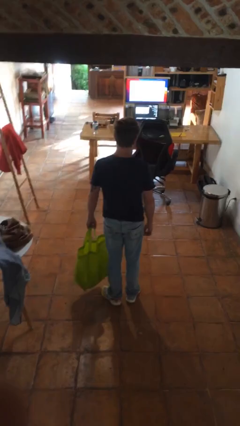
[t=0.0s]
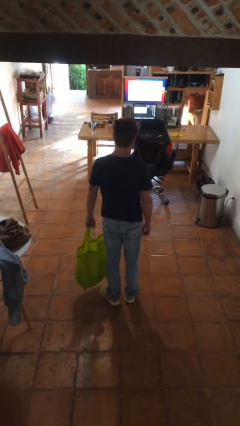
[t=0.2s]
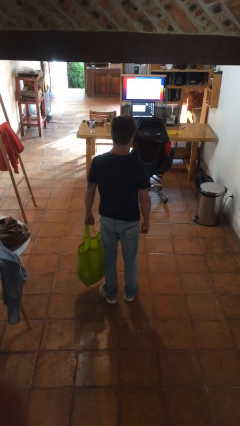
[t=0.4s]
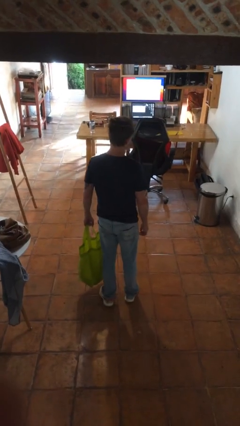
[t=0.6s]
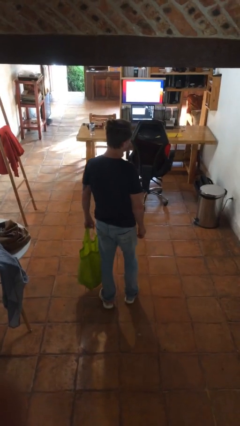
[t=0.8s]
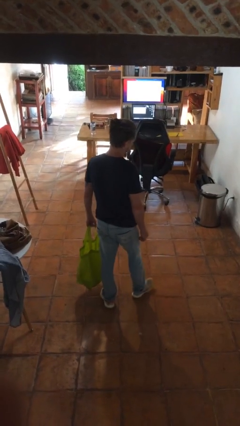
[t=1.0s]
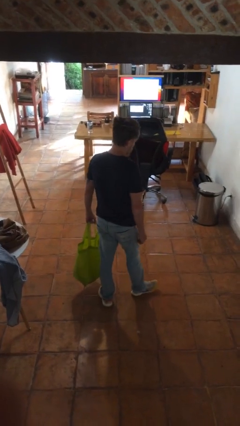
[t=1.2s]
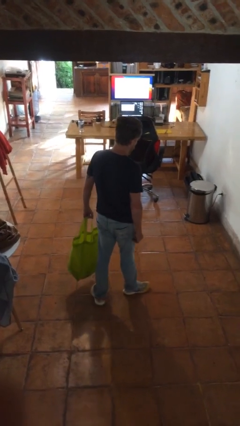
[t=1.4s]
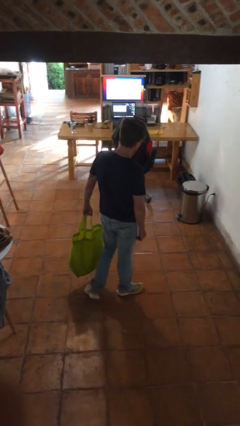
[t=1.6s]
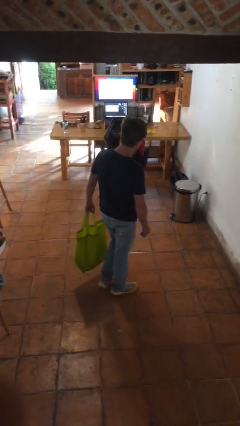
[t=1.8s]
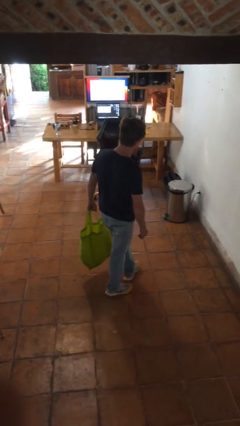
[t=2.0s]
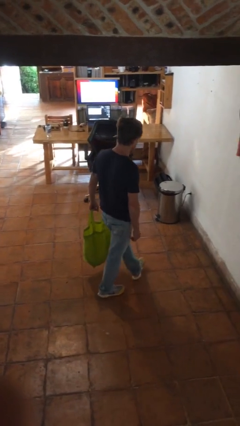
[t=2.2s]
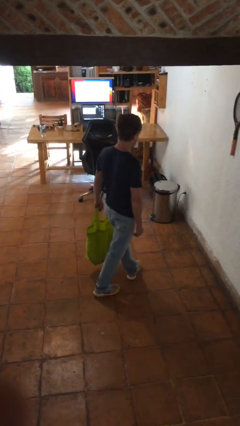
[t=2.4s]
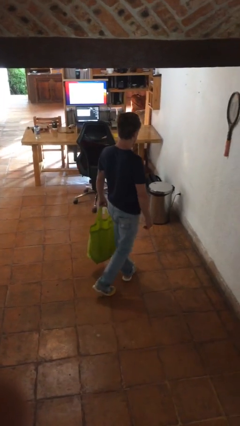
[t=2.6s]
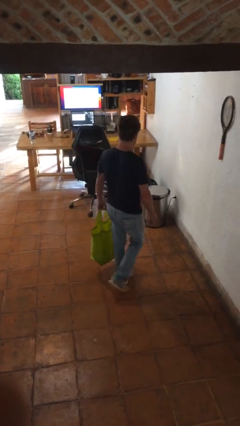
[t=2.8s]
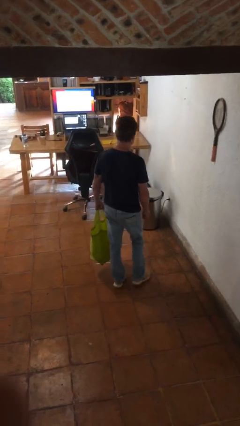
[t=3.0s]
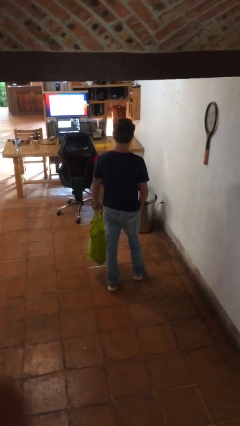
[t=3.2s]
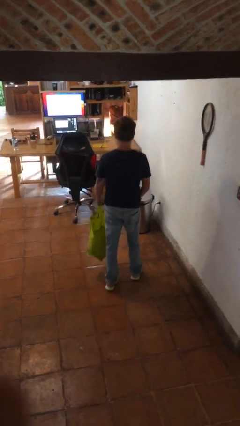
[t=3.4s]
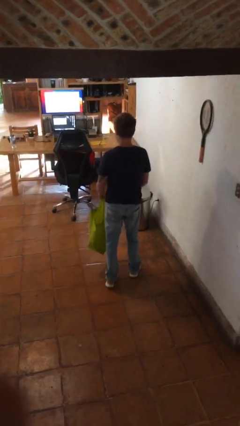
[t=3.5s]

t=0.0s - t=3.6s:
person carries groceries

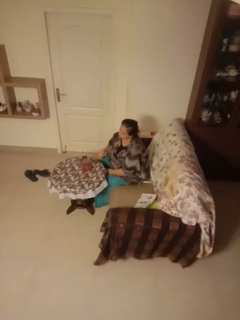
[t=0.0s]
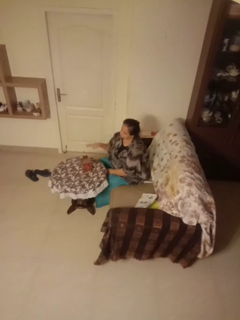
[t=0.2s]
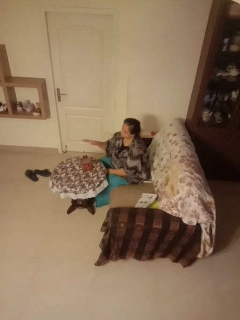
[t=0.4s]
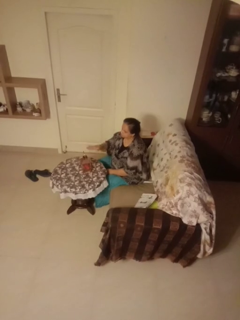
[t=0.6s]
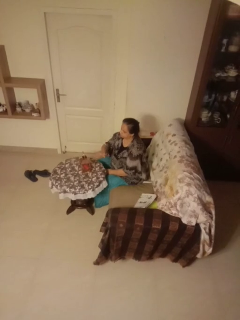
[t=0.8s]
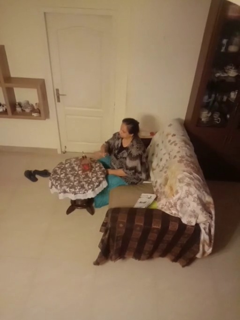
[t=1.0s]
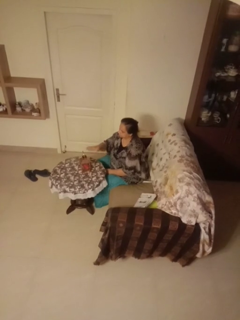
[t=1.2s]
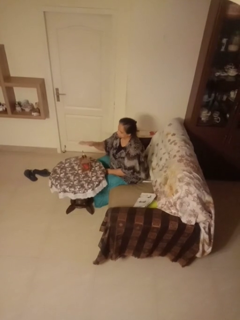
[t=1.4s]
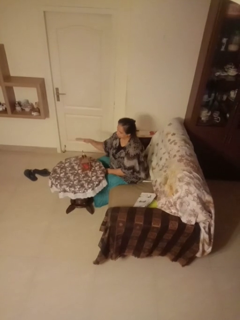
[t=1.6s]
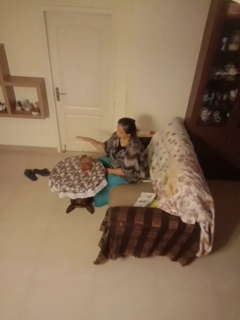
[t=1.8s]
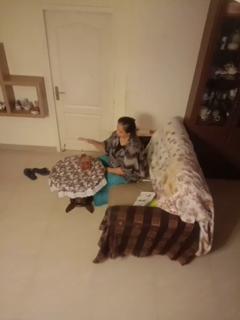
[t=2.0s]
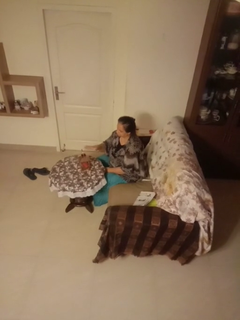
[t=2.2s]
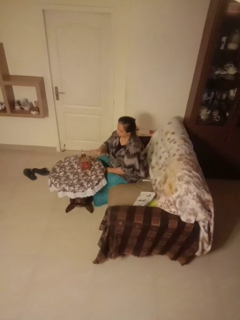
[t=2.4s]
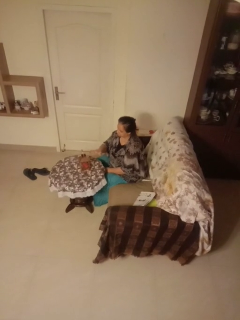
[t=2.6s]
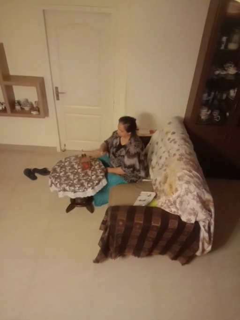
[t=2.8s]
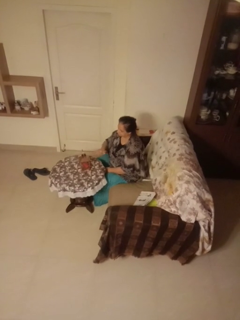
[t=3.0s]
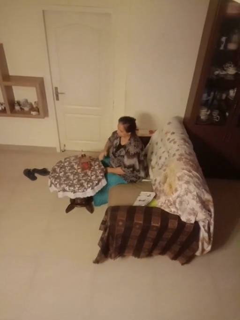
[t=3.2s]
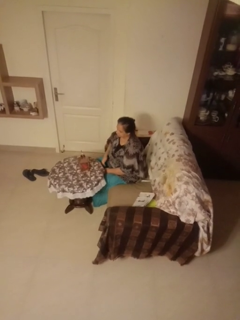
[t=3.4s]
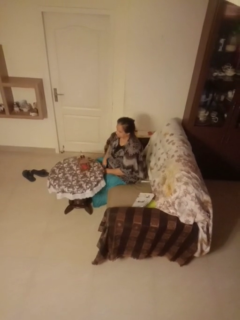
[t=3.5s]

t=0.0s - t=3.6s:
person waves hand over object

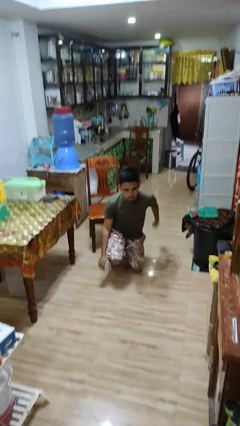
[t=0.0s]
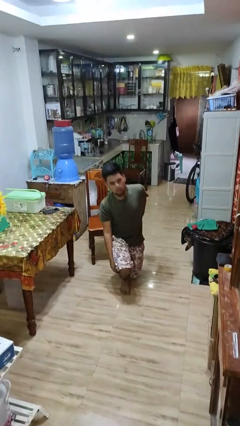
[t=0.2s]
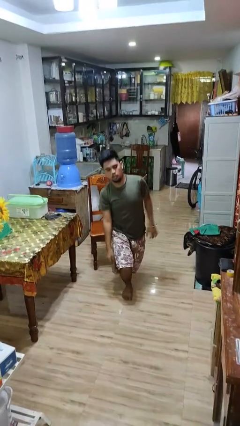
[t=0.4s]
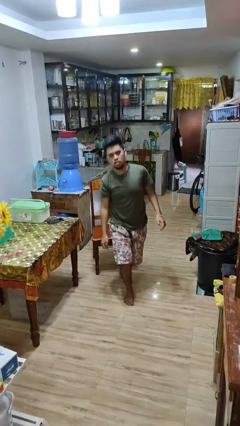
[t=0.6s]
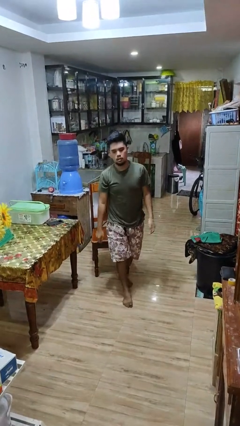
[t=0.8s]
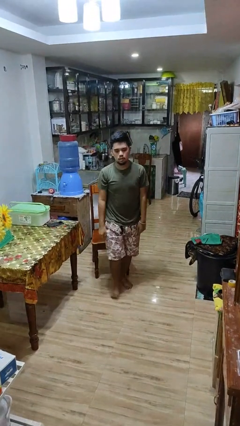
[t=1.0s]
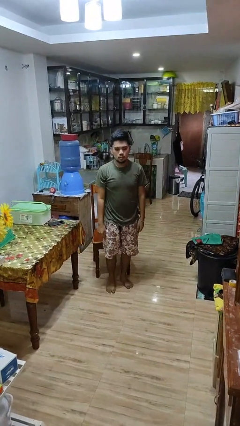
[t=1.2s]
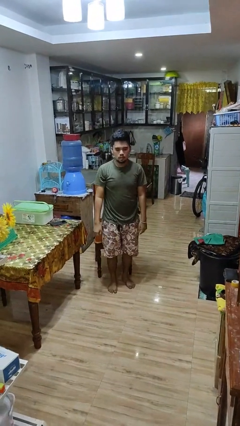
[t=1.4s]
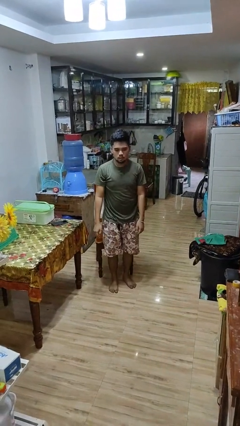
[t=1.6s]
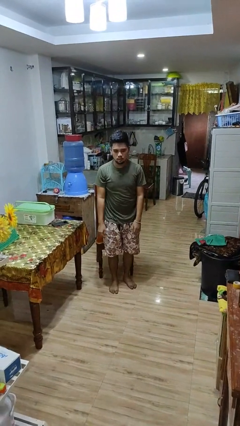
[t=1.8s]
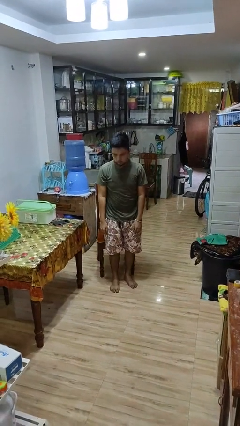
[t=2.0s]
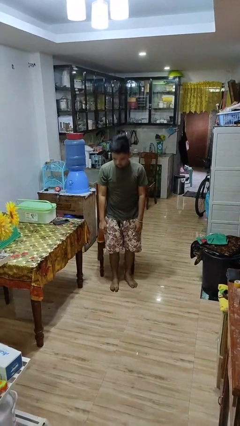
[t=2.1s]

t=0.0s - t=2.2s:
person stands up from floor

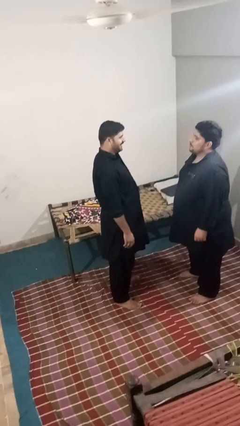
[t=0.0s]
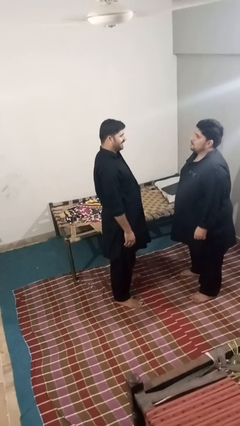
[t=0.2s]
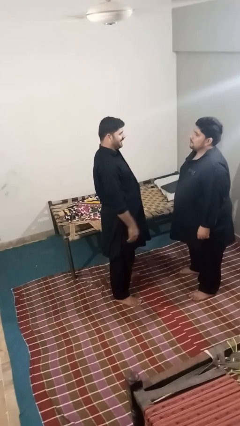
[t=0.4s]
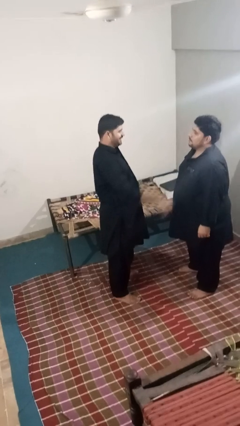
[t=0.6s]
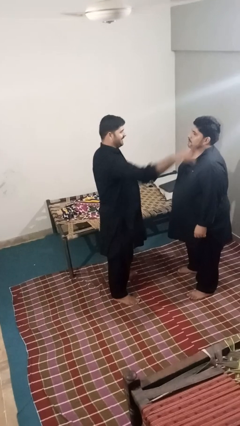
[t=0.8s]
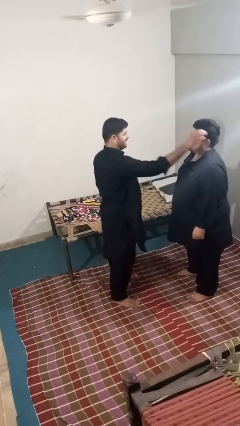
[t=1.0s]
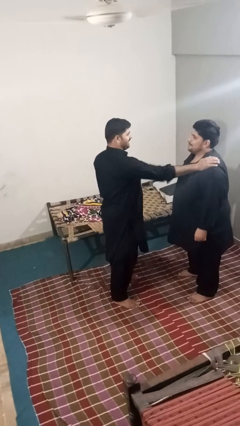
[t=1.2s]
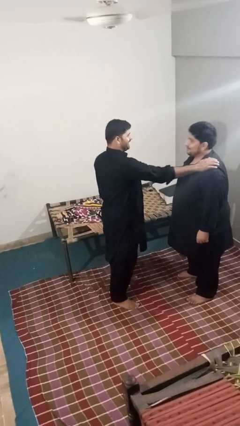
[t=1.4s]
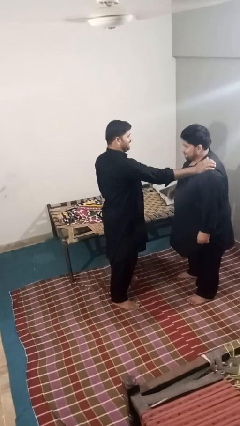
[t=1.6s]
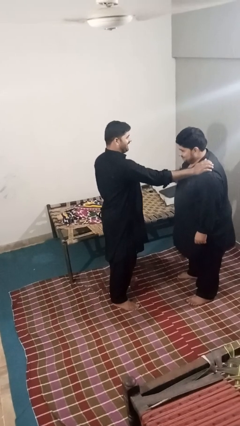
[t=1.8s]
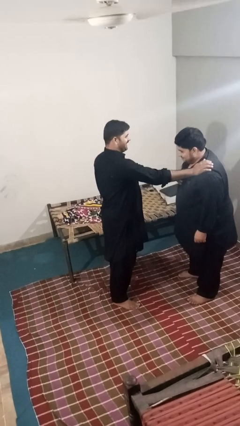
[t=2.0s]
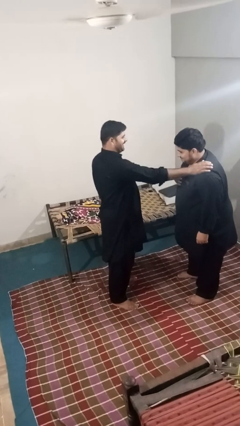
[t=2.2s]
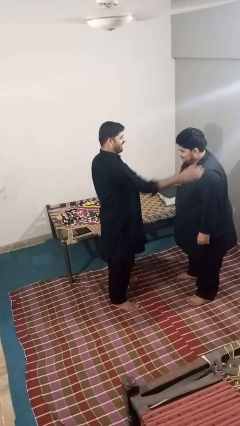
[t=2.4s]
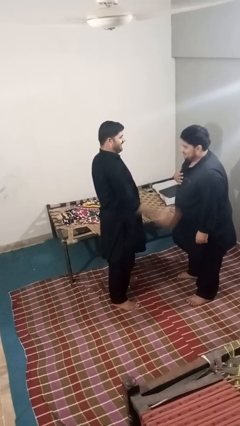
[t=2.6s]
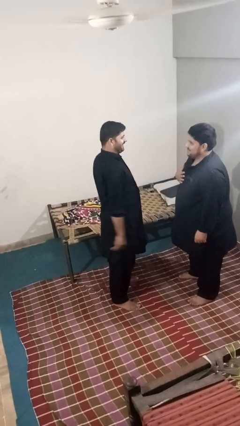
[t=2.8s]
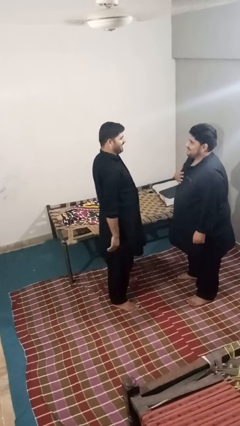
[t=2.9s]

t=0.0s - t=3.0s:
person pounds shoulders of person

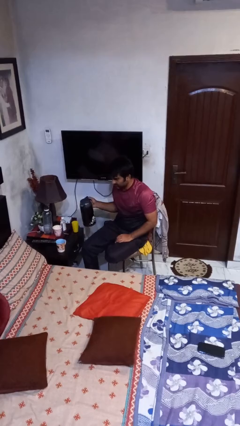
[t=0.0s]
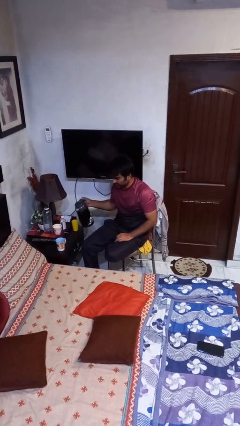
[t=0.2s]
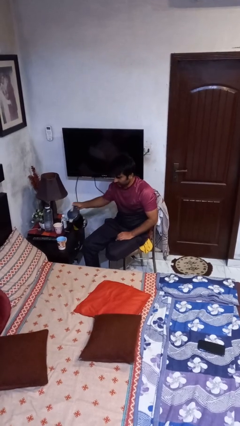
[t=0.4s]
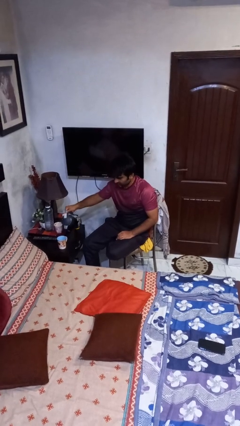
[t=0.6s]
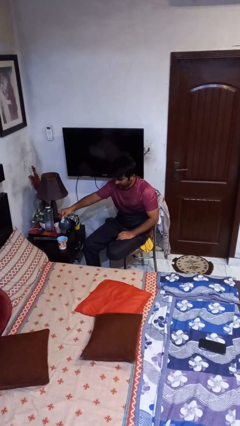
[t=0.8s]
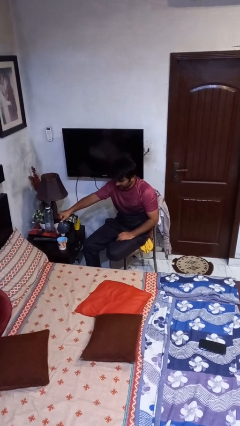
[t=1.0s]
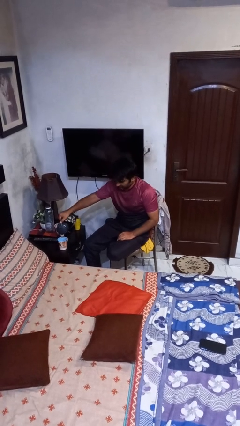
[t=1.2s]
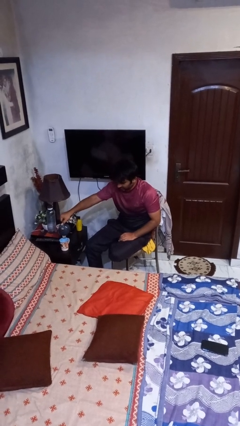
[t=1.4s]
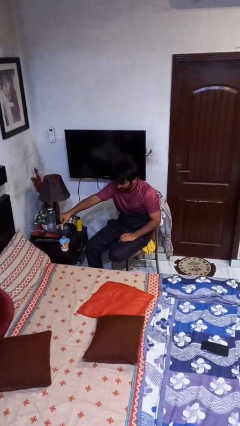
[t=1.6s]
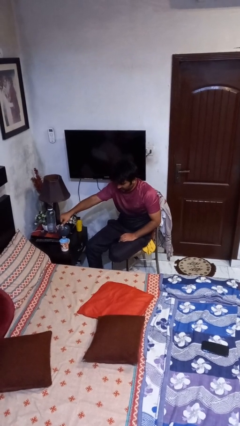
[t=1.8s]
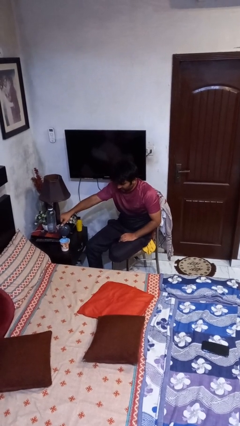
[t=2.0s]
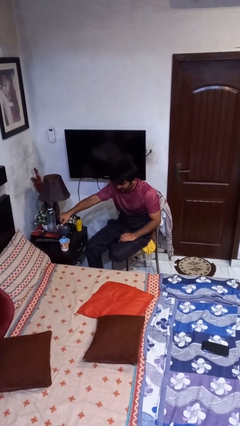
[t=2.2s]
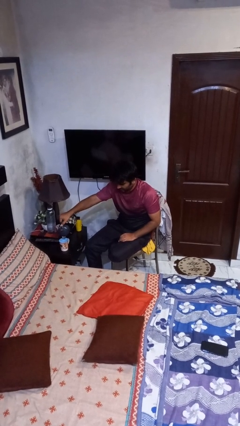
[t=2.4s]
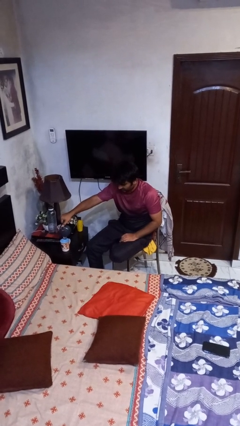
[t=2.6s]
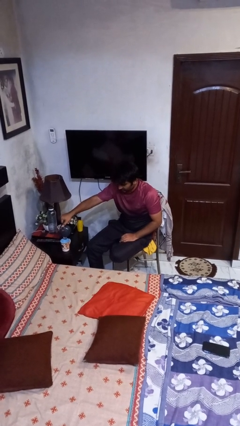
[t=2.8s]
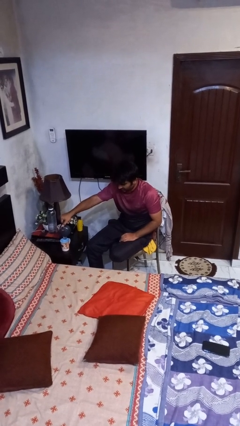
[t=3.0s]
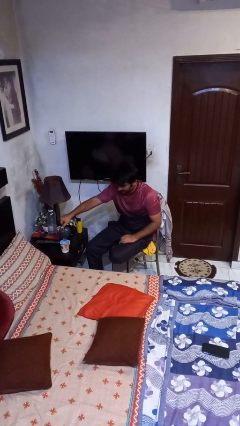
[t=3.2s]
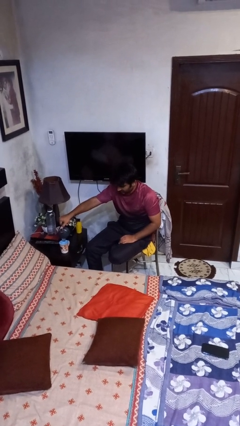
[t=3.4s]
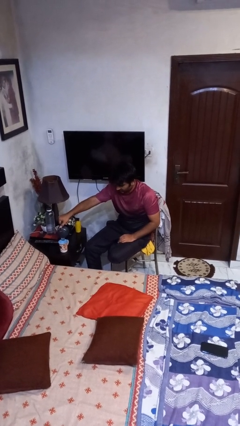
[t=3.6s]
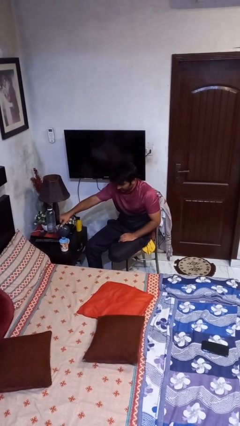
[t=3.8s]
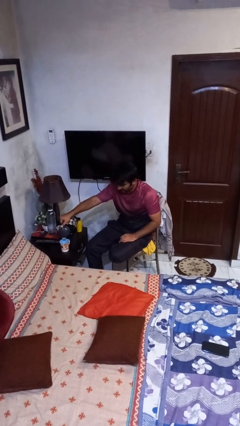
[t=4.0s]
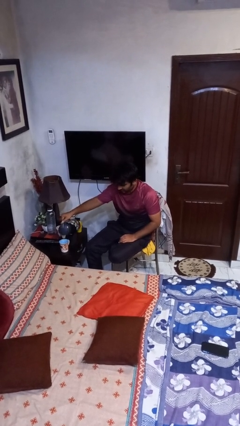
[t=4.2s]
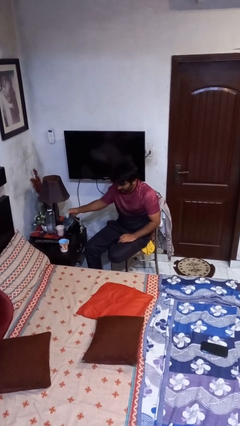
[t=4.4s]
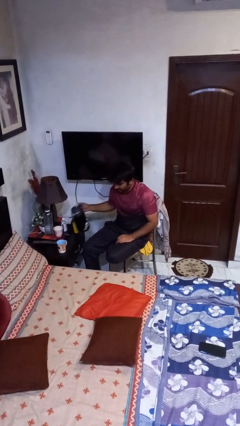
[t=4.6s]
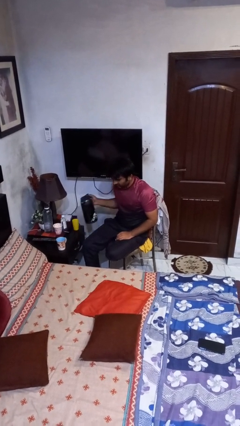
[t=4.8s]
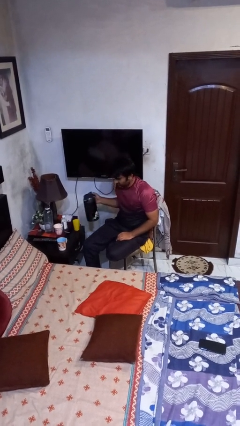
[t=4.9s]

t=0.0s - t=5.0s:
person pours coffee into mug

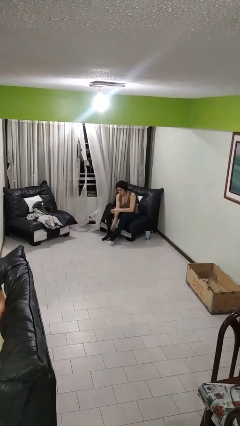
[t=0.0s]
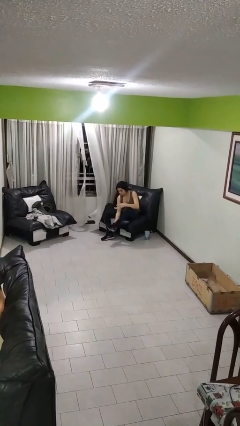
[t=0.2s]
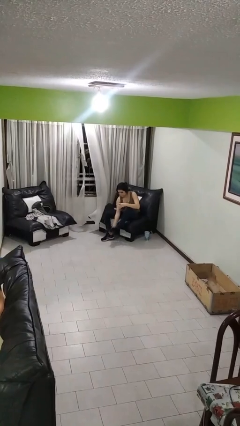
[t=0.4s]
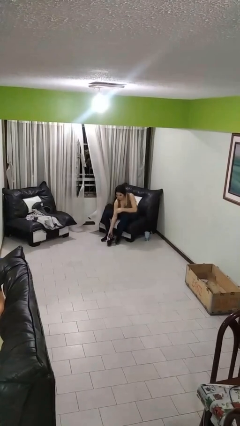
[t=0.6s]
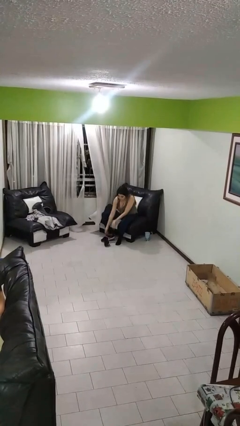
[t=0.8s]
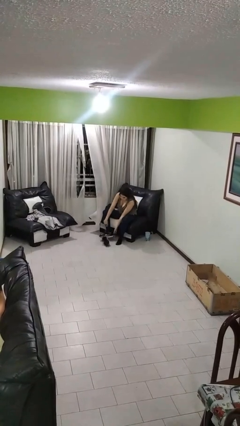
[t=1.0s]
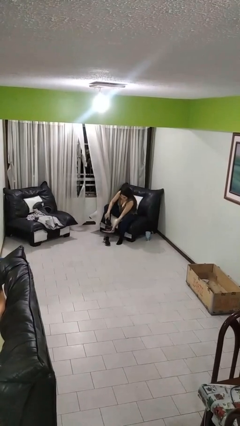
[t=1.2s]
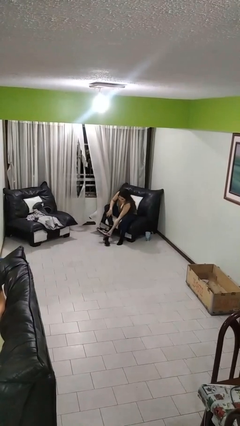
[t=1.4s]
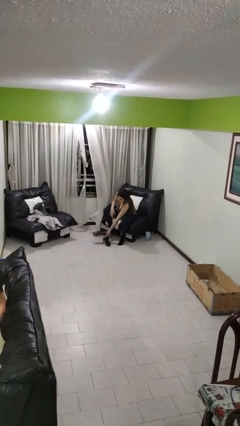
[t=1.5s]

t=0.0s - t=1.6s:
person takes off shoes
